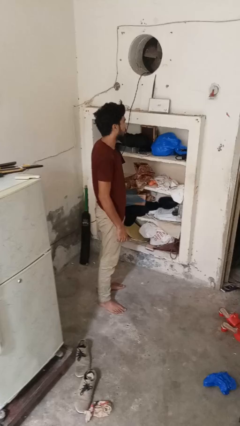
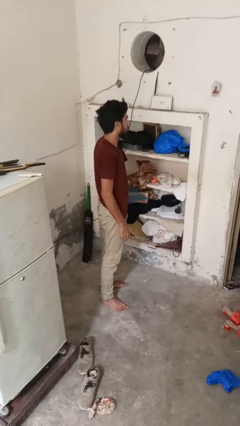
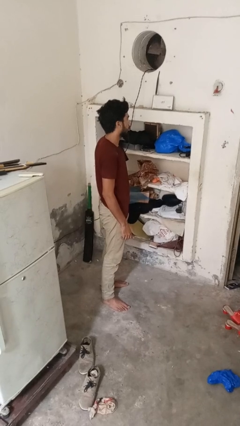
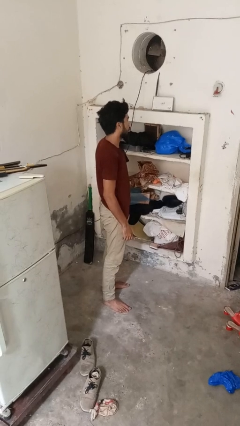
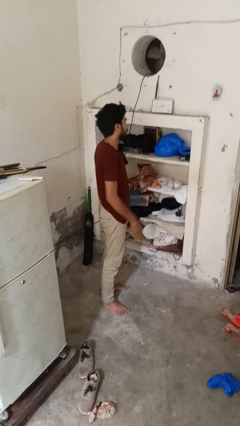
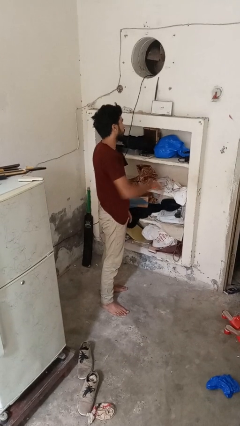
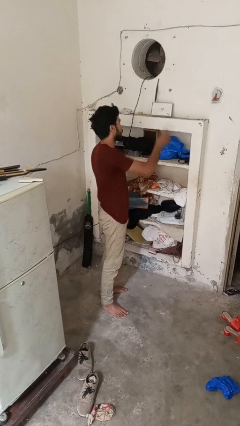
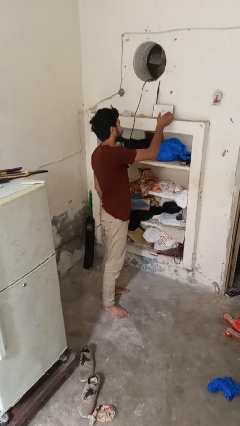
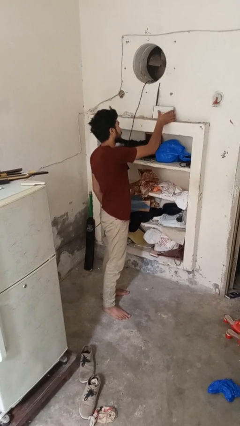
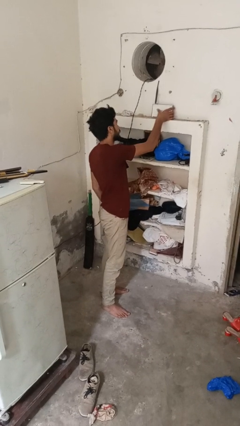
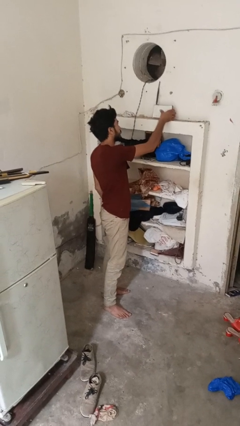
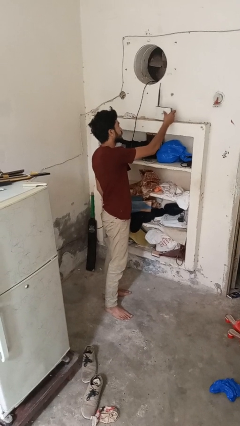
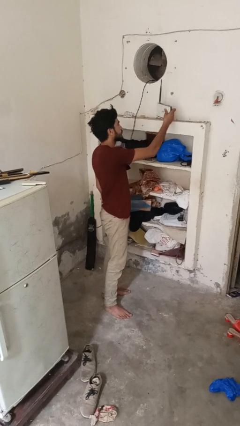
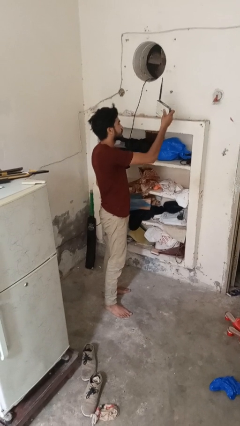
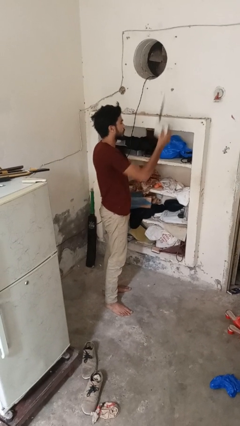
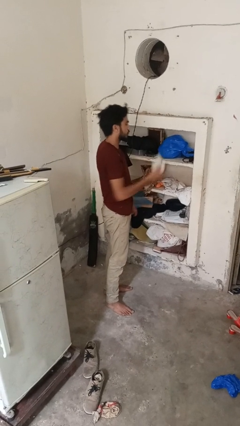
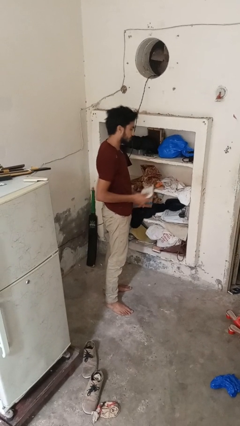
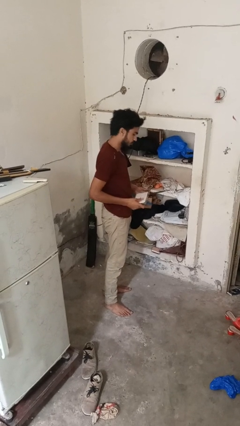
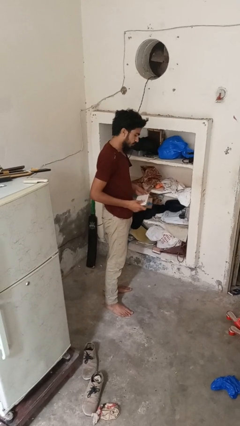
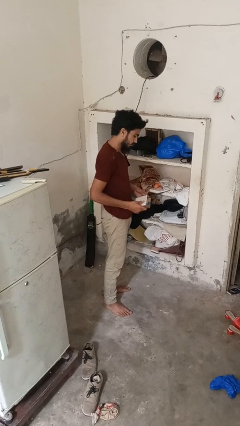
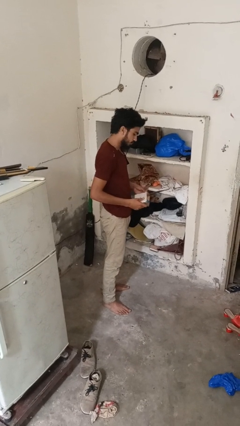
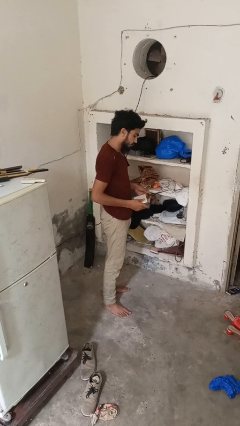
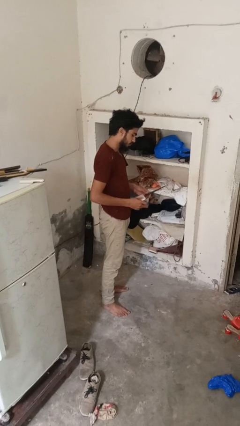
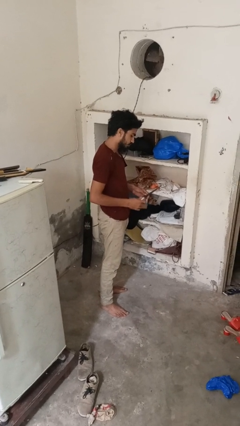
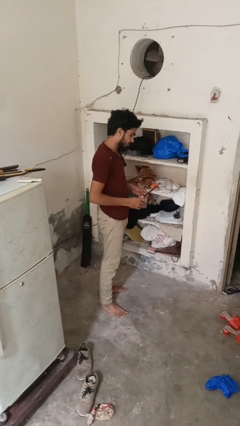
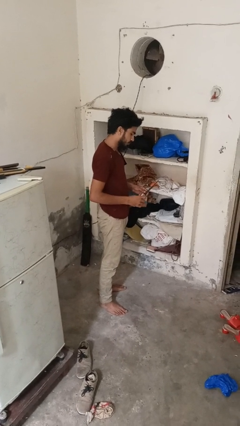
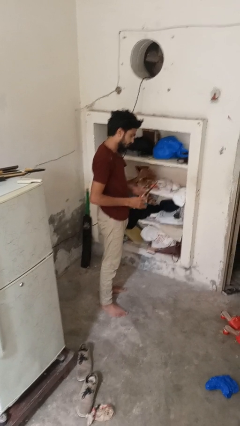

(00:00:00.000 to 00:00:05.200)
person picks up object from shelf

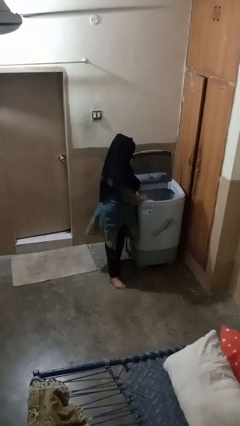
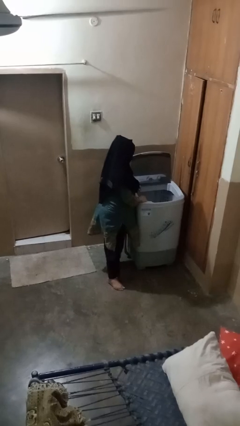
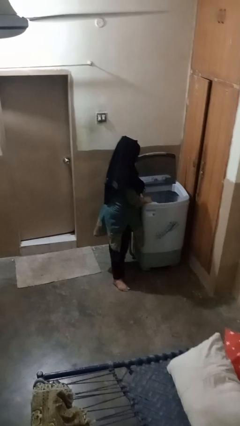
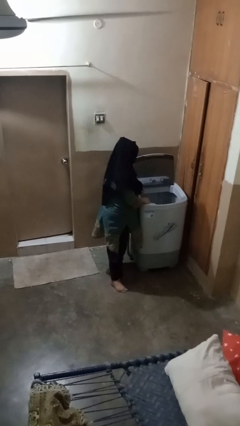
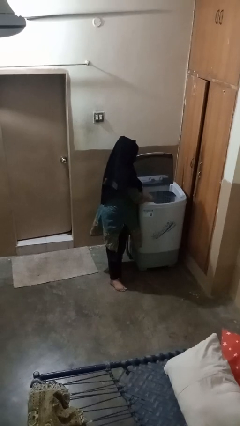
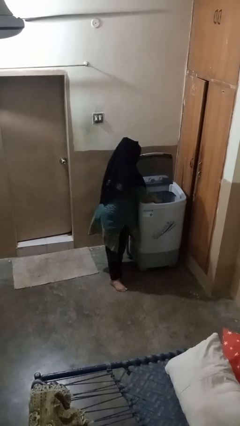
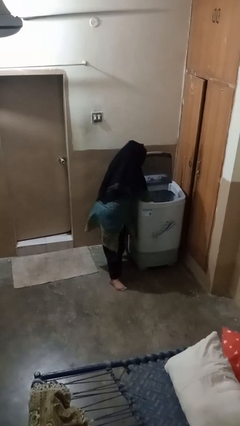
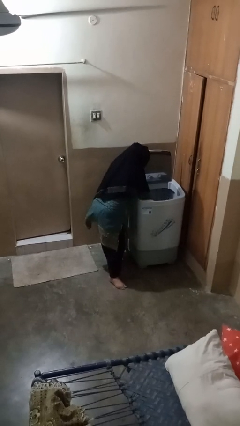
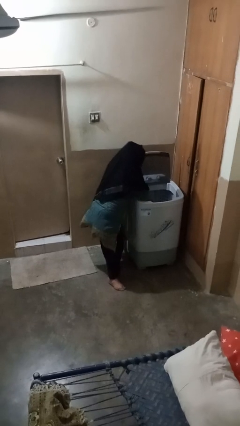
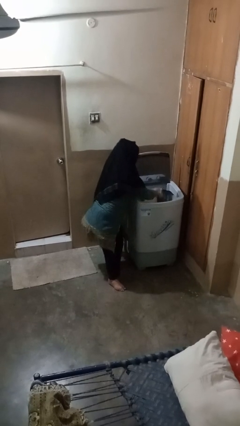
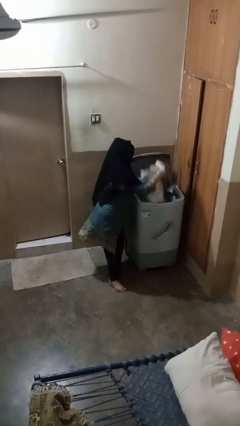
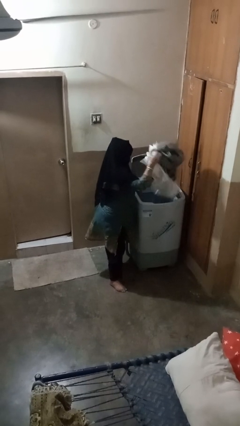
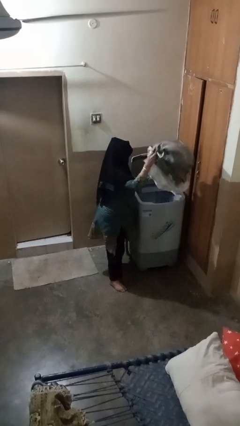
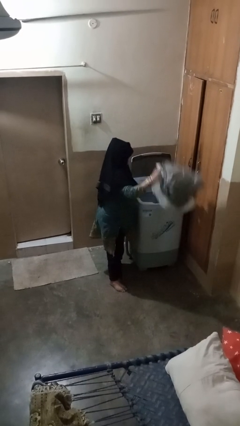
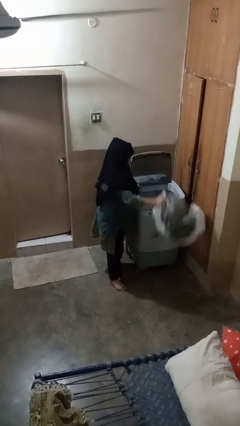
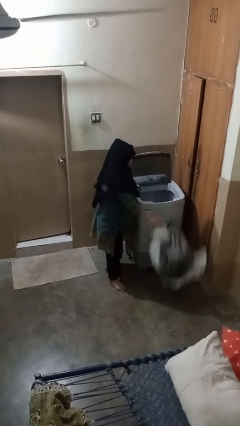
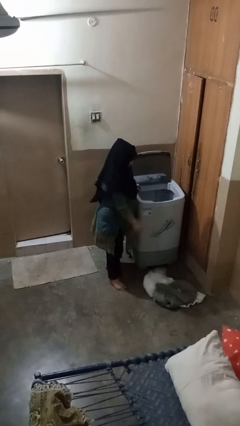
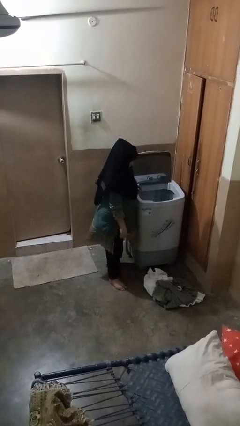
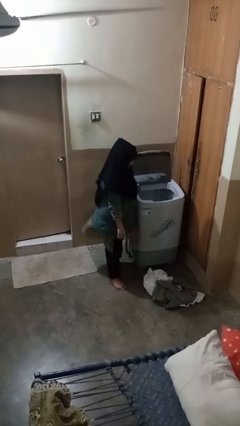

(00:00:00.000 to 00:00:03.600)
person unloads clotheswasher

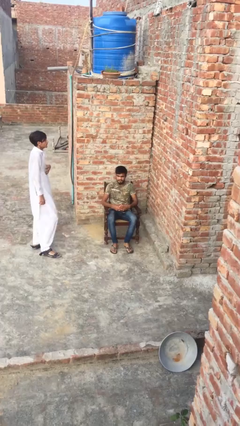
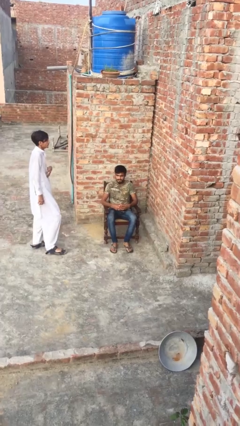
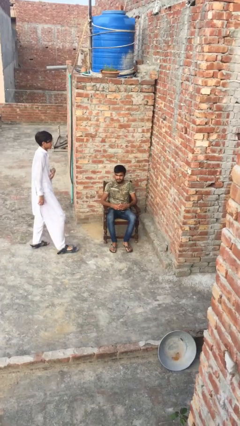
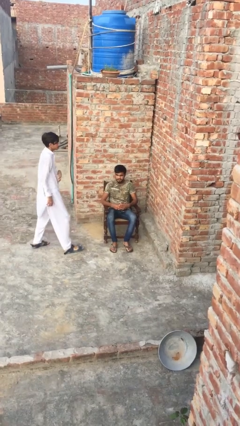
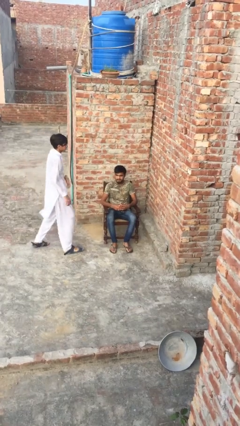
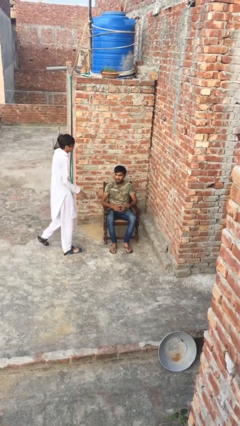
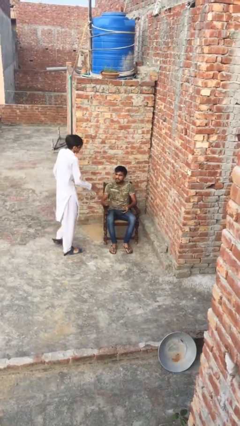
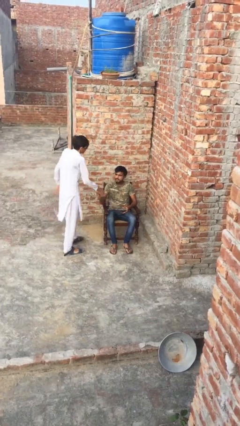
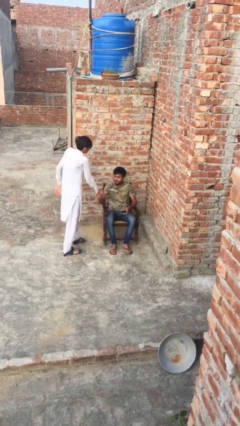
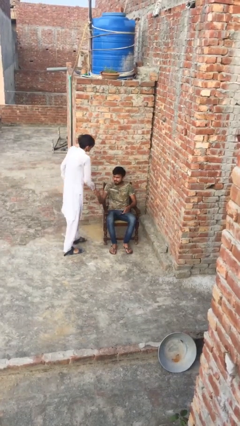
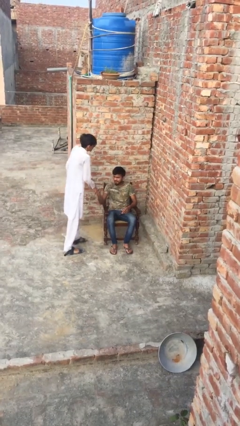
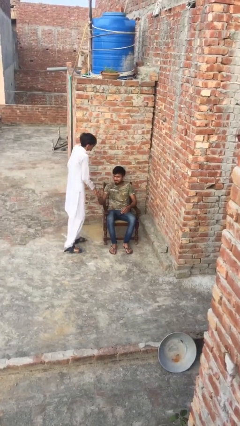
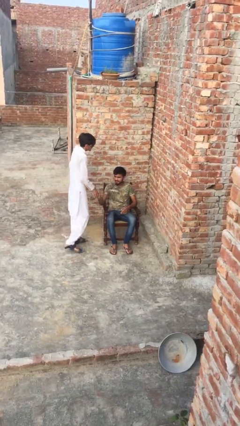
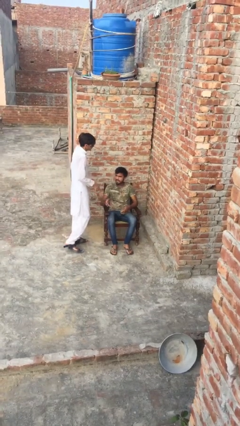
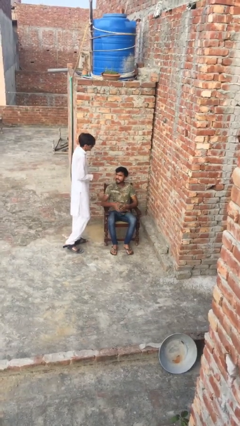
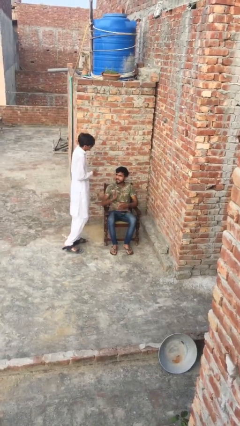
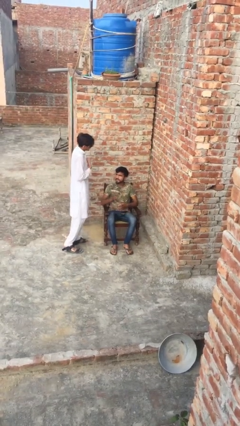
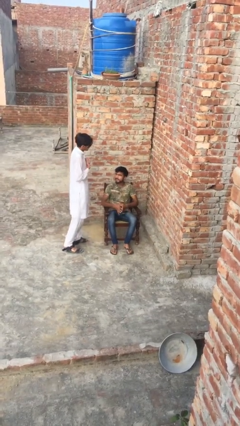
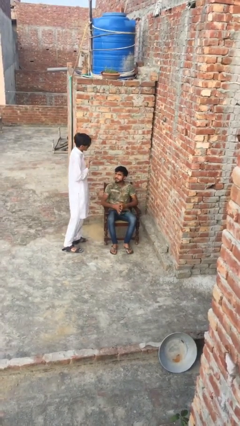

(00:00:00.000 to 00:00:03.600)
person shakes hand

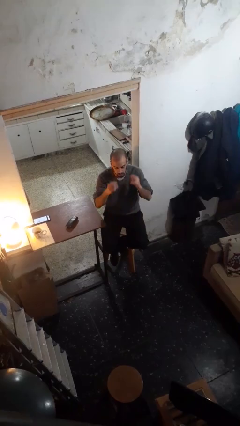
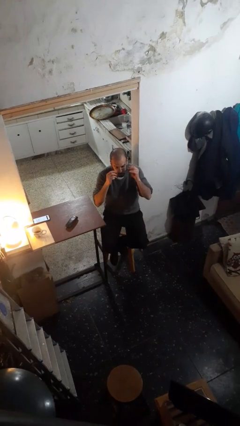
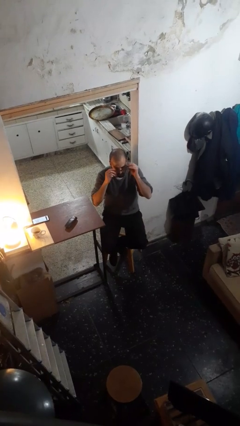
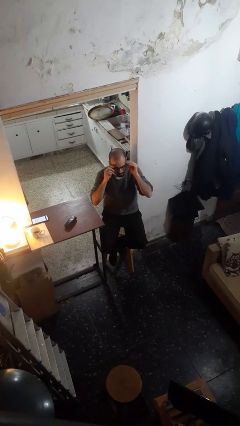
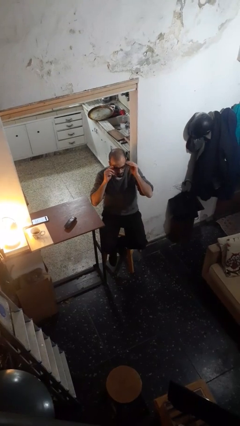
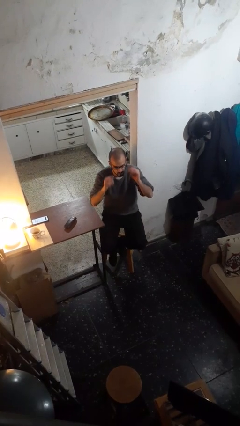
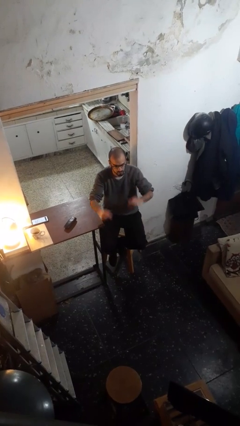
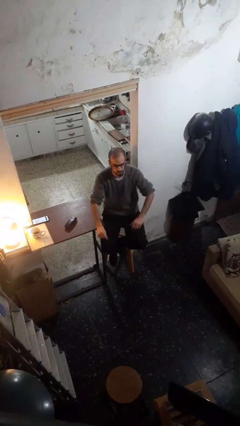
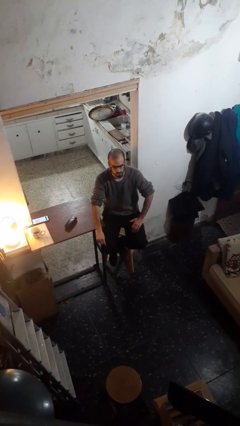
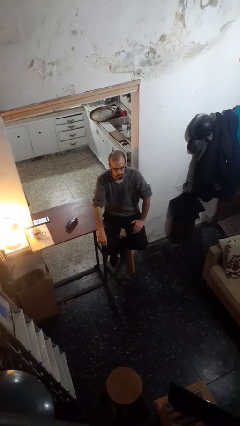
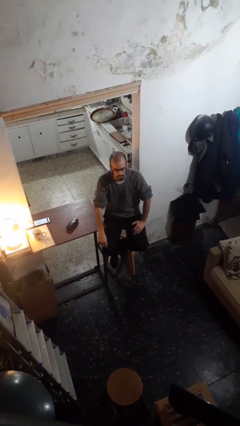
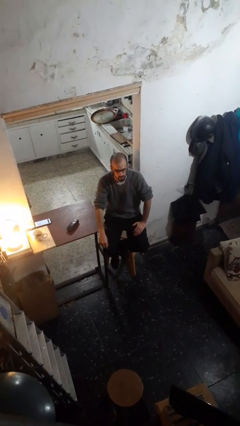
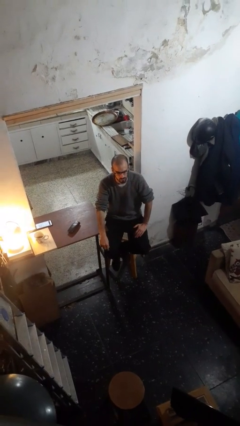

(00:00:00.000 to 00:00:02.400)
person puts on glasses

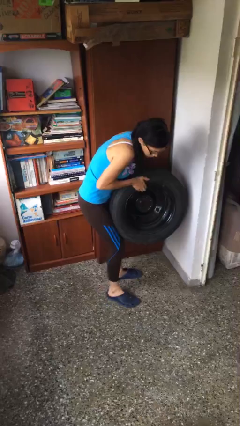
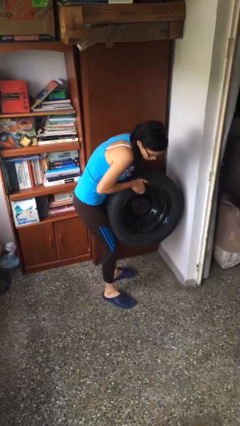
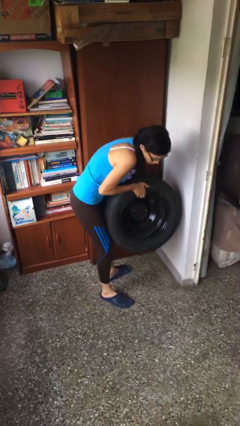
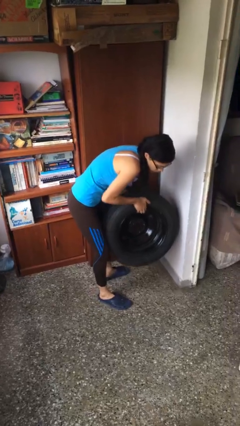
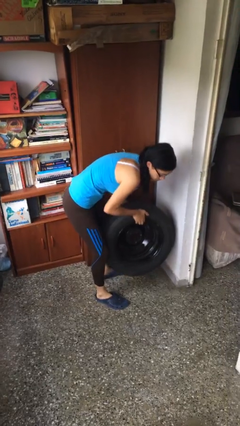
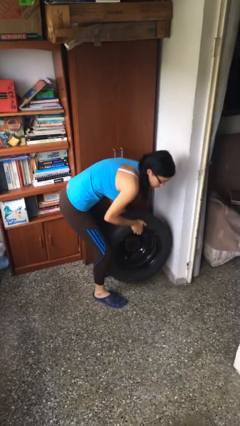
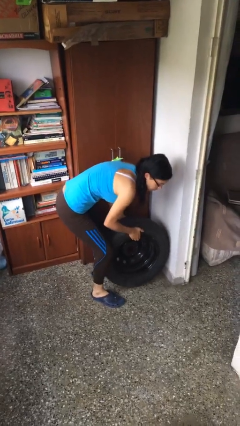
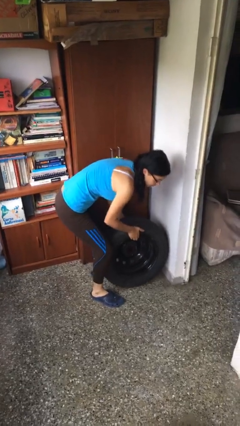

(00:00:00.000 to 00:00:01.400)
person puts down object on floor

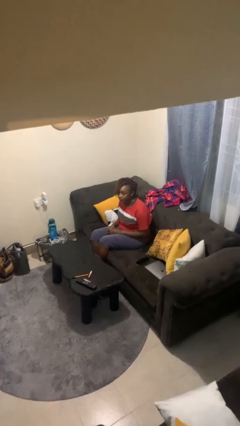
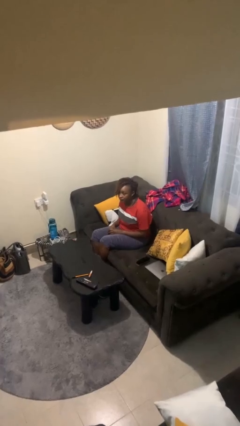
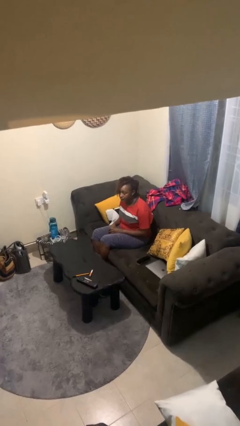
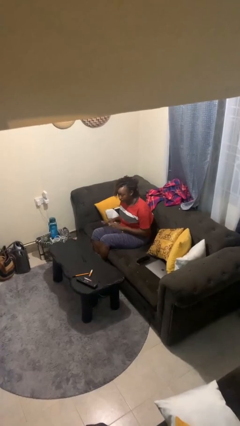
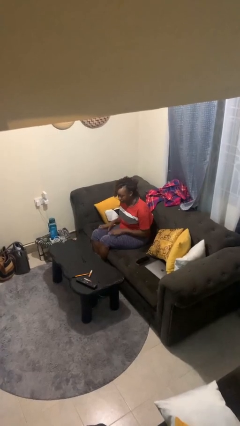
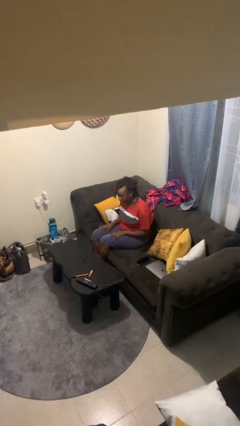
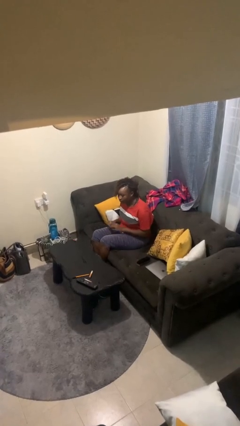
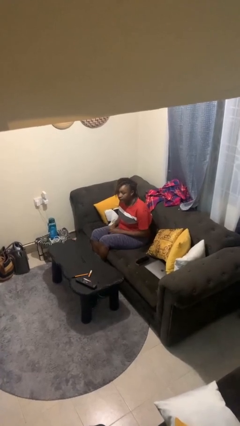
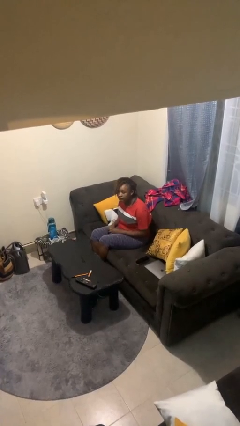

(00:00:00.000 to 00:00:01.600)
person slaps hands on thighs
